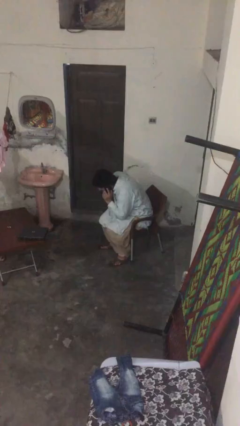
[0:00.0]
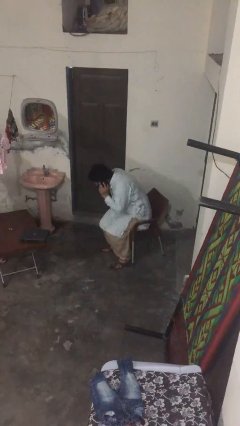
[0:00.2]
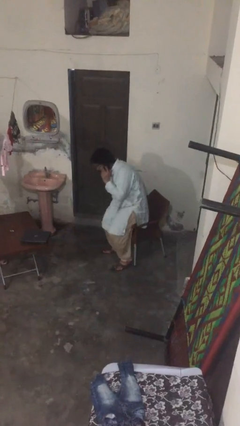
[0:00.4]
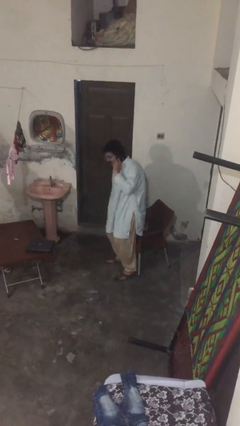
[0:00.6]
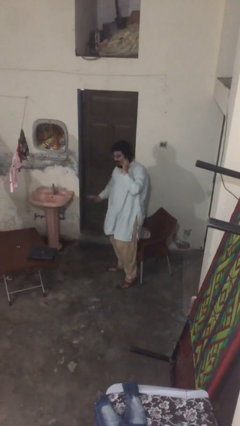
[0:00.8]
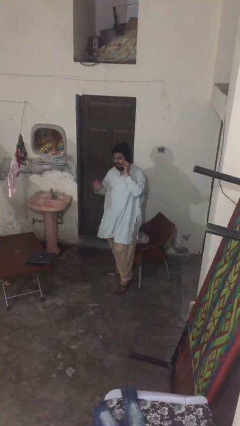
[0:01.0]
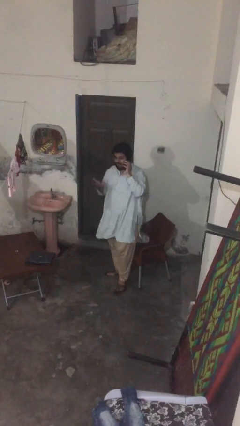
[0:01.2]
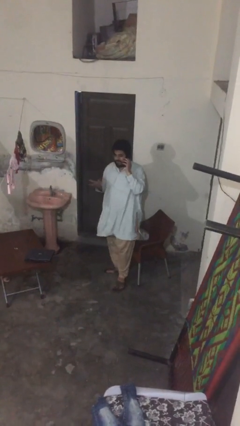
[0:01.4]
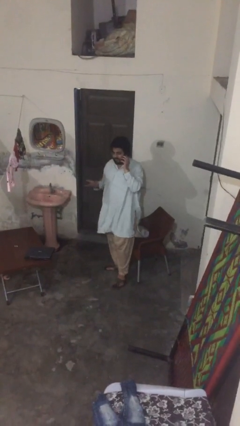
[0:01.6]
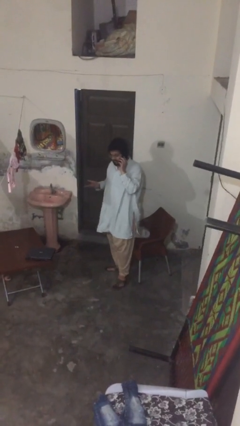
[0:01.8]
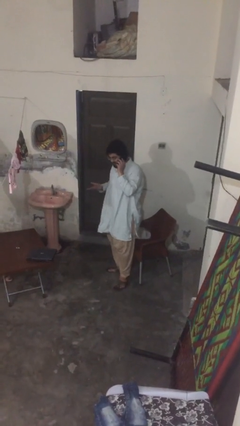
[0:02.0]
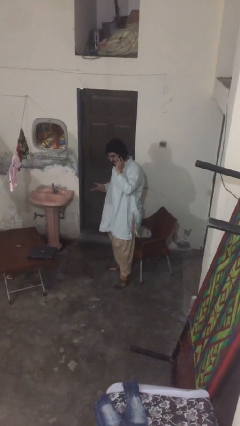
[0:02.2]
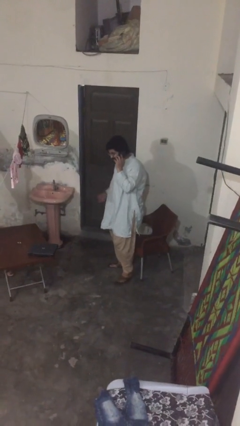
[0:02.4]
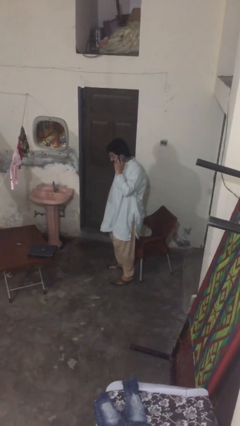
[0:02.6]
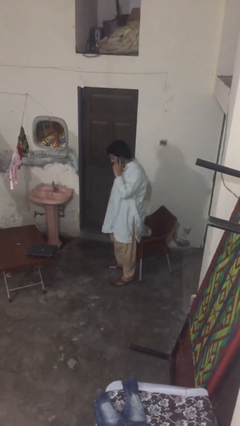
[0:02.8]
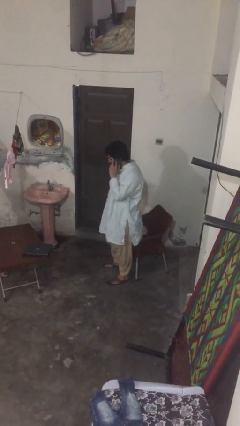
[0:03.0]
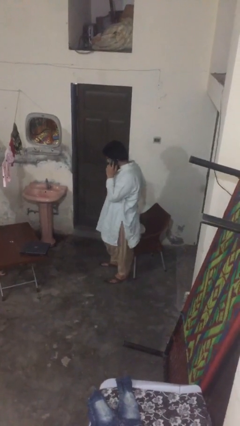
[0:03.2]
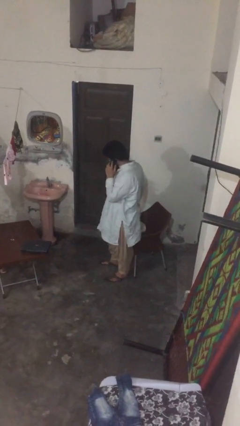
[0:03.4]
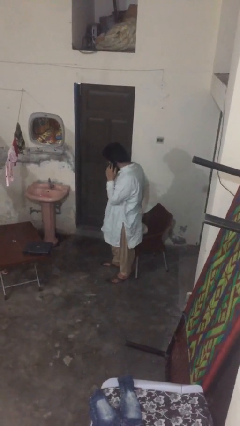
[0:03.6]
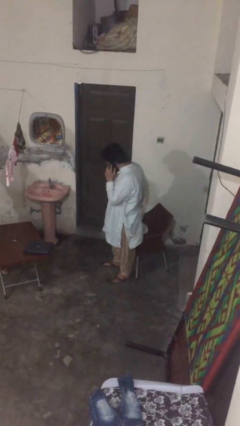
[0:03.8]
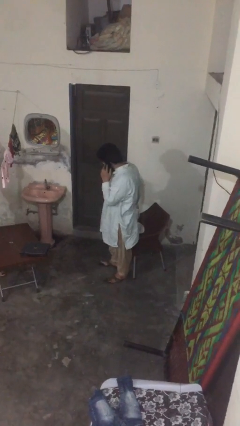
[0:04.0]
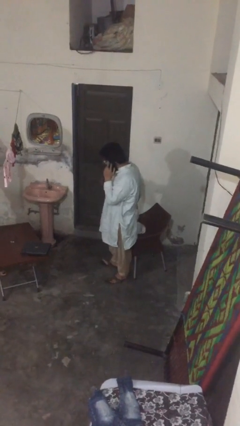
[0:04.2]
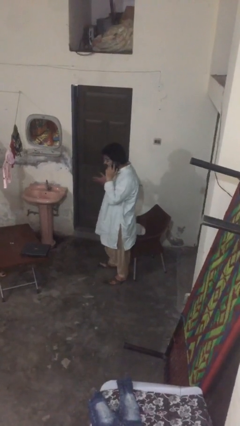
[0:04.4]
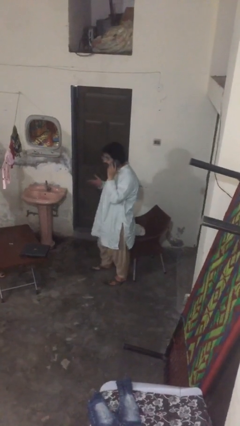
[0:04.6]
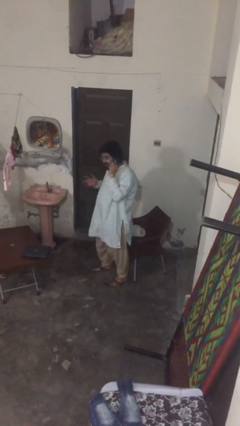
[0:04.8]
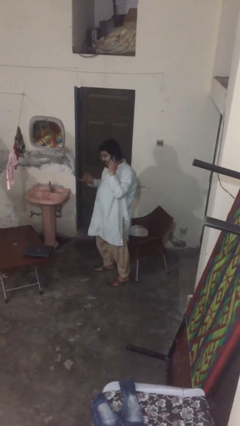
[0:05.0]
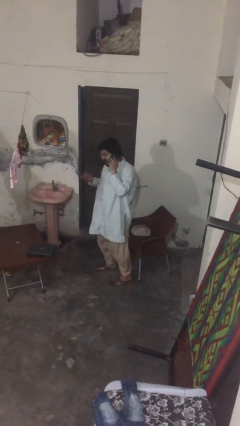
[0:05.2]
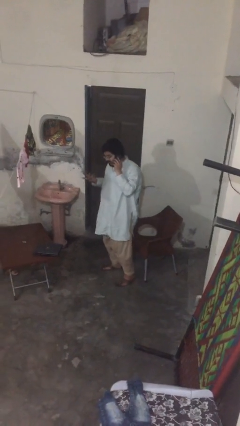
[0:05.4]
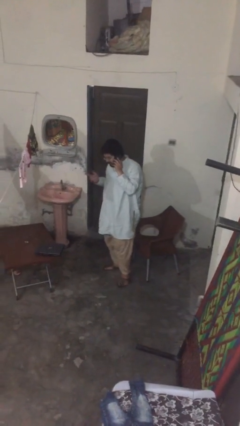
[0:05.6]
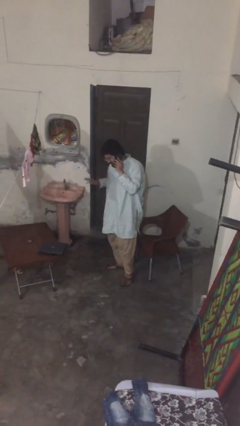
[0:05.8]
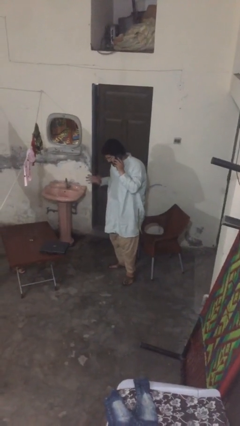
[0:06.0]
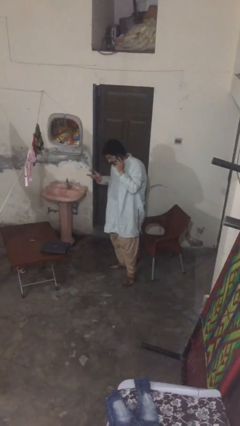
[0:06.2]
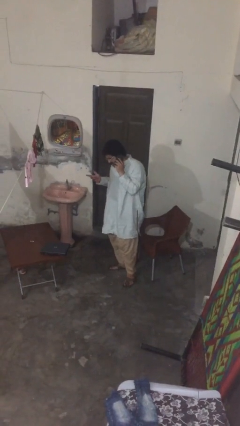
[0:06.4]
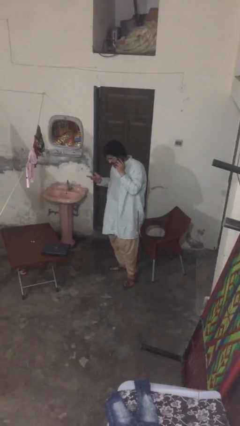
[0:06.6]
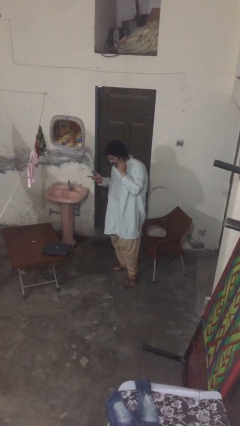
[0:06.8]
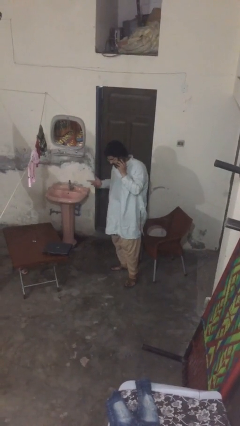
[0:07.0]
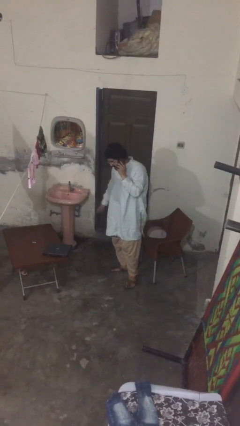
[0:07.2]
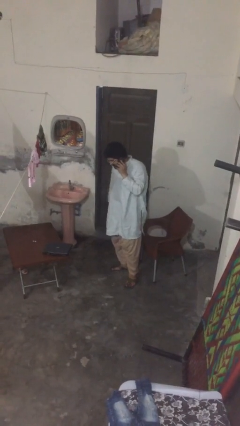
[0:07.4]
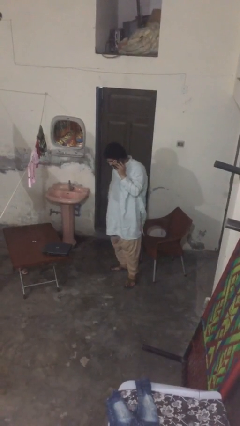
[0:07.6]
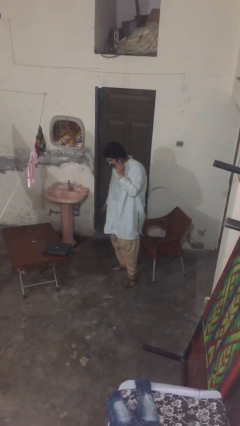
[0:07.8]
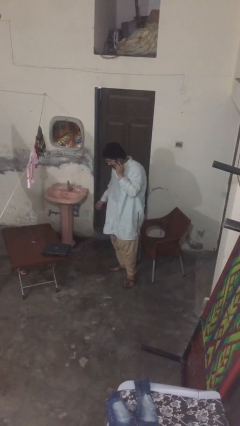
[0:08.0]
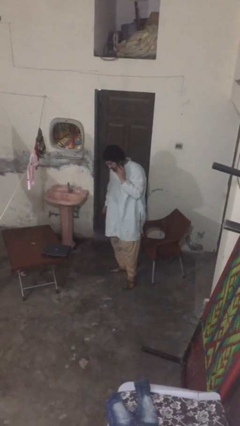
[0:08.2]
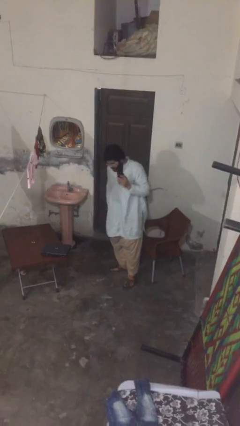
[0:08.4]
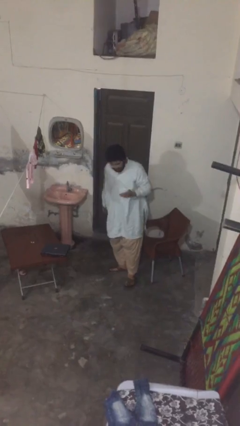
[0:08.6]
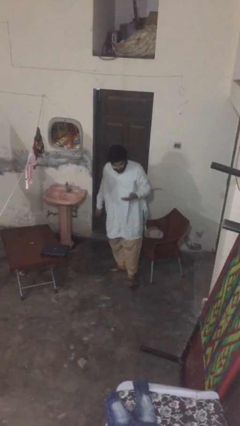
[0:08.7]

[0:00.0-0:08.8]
person talks on phone

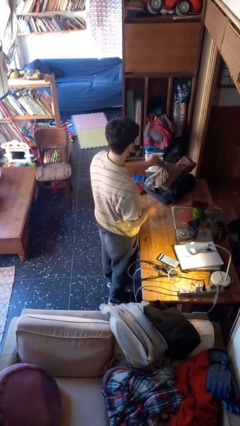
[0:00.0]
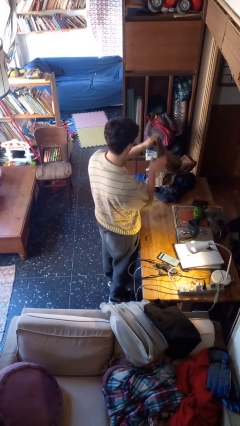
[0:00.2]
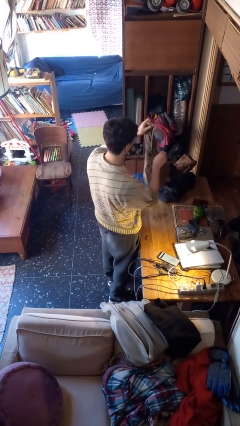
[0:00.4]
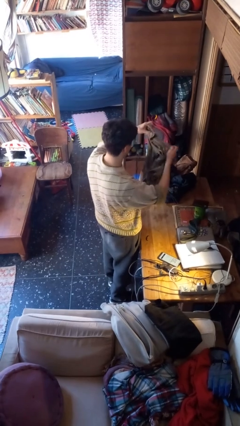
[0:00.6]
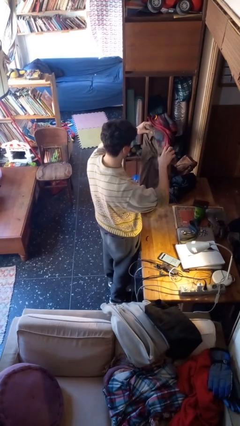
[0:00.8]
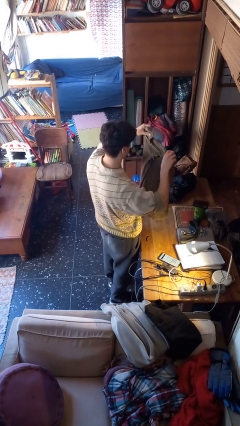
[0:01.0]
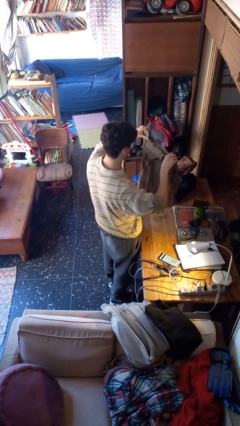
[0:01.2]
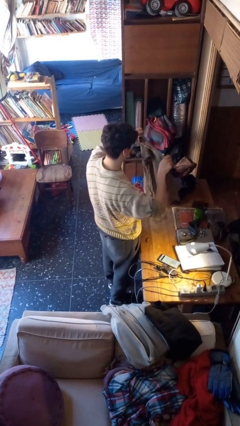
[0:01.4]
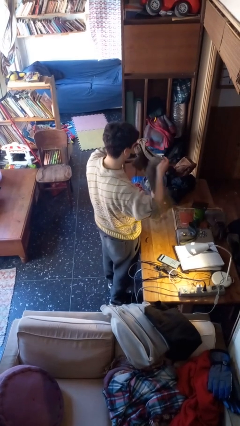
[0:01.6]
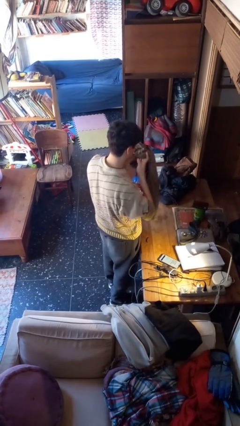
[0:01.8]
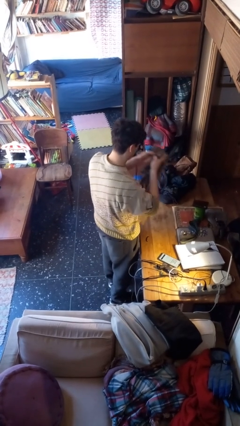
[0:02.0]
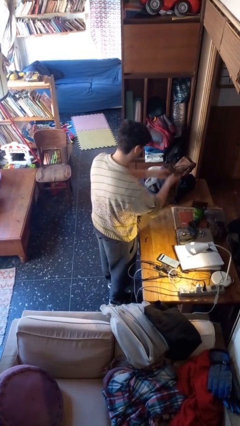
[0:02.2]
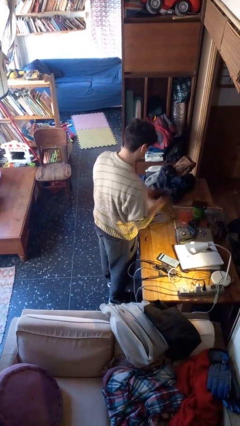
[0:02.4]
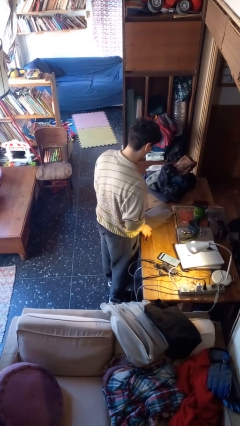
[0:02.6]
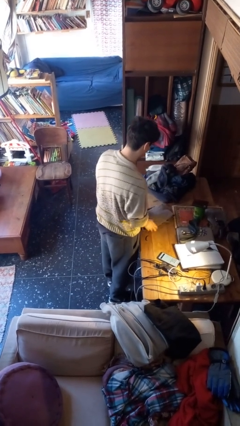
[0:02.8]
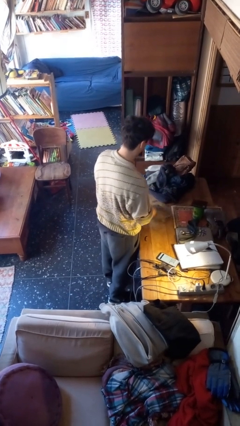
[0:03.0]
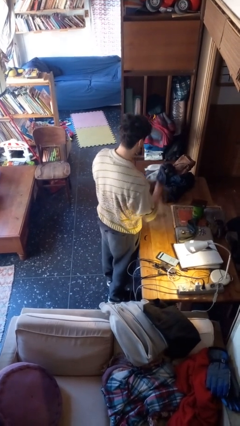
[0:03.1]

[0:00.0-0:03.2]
person folds shirt

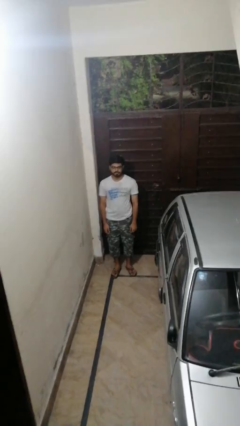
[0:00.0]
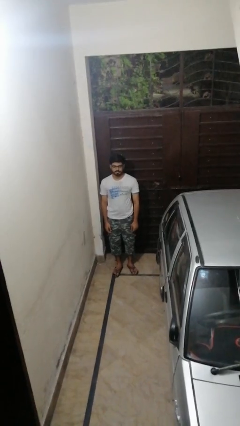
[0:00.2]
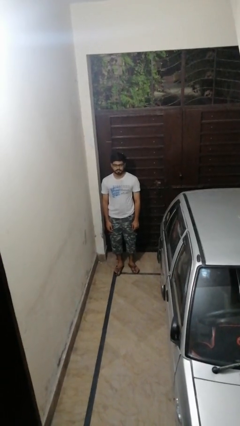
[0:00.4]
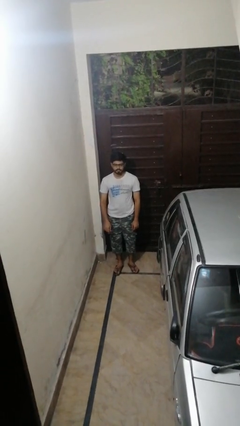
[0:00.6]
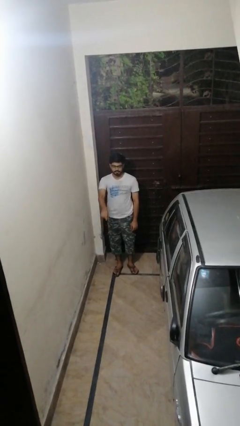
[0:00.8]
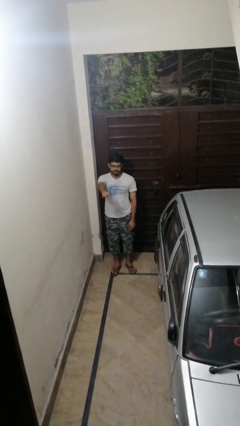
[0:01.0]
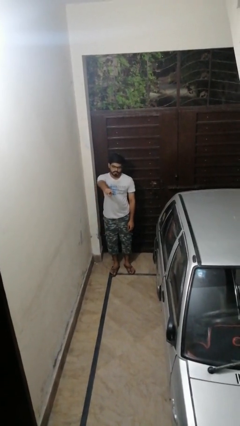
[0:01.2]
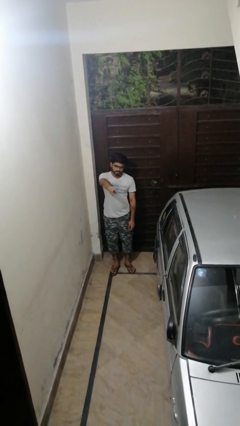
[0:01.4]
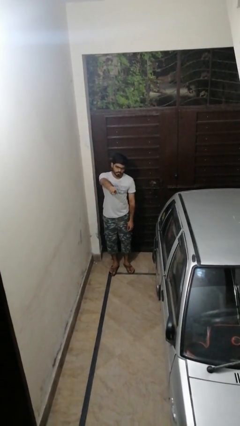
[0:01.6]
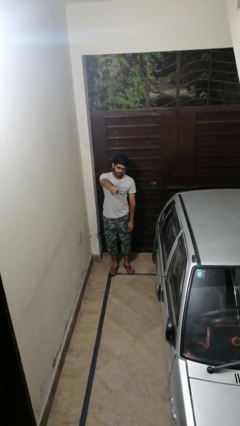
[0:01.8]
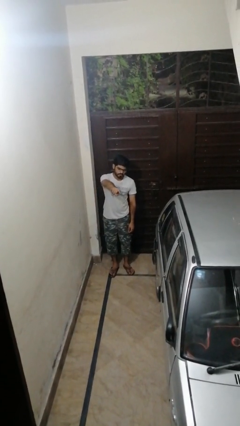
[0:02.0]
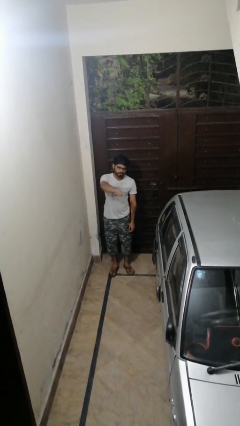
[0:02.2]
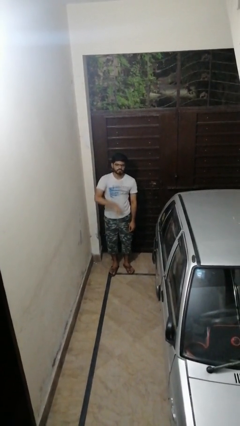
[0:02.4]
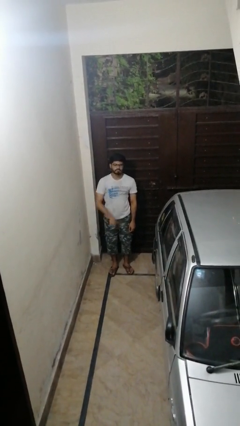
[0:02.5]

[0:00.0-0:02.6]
person points at person

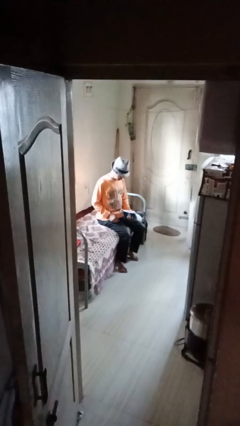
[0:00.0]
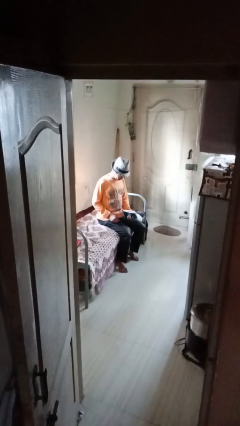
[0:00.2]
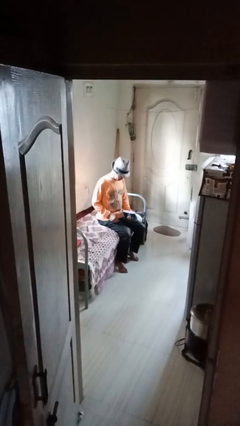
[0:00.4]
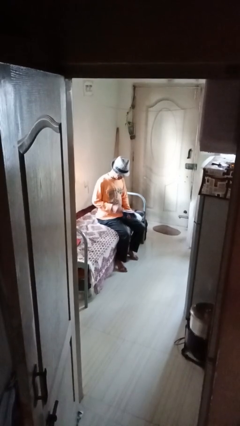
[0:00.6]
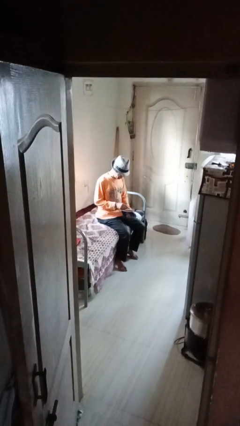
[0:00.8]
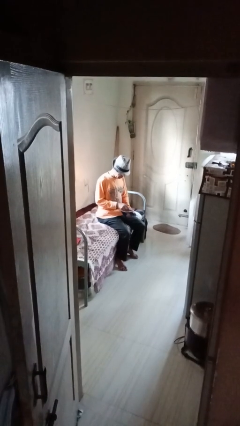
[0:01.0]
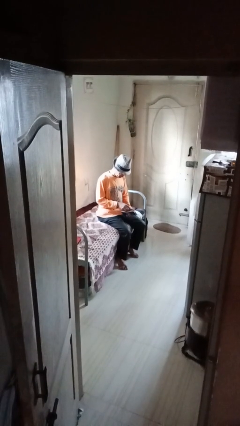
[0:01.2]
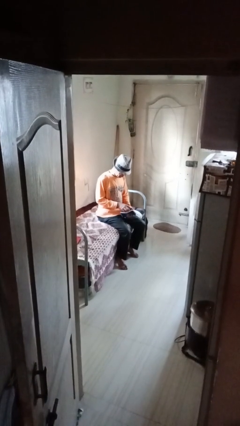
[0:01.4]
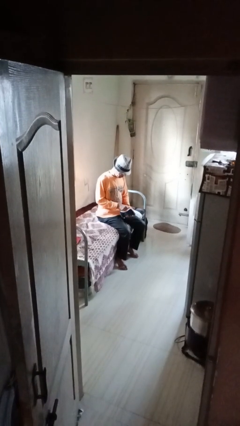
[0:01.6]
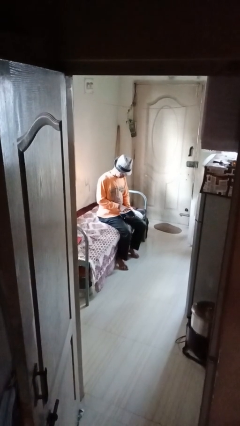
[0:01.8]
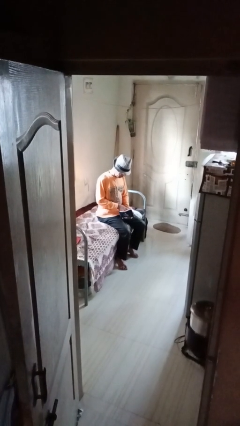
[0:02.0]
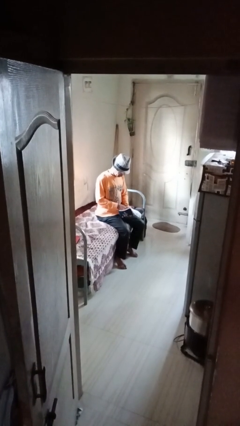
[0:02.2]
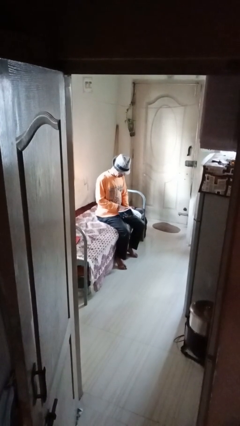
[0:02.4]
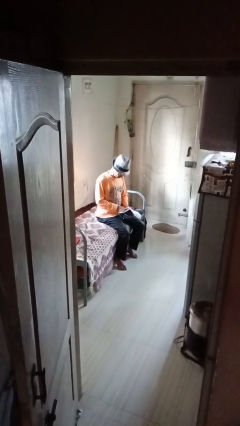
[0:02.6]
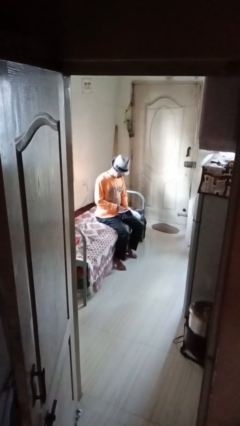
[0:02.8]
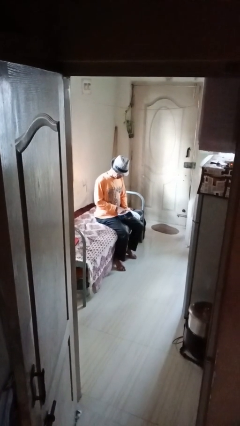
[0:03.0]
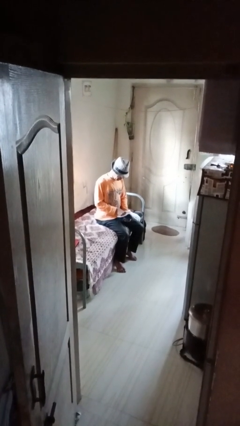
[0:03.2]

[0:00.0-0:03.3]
person searches in purse

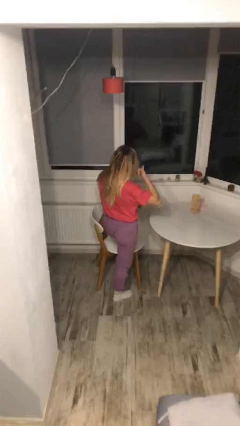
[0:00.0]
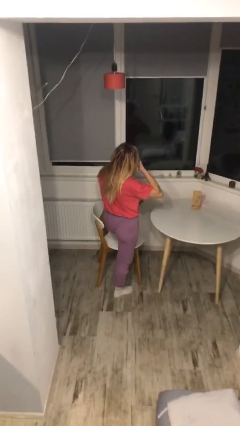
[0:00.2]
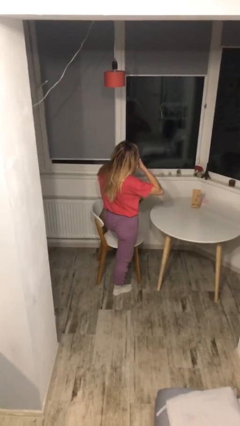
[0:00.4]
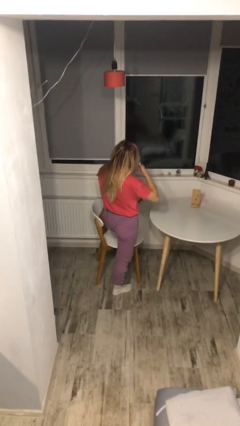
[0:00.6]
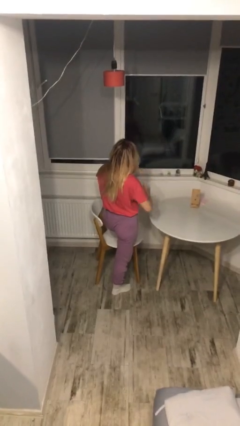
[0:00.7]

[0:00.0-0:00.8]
person gestures number five
